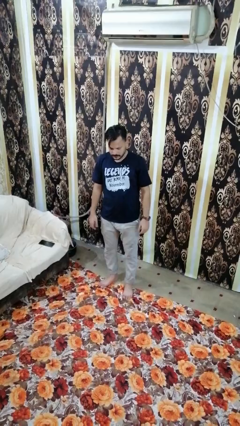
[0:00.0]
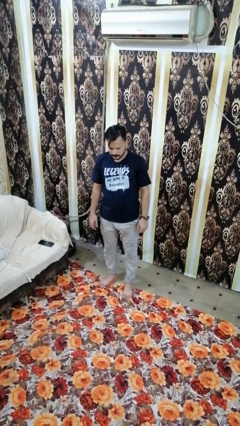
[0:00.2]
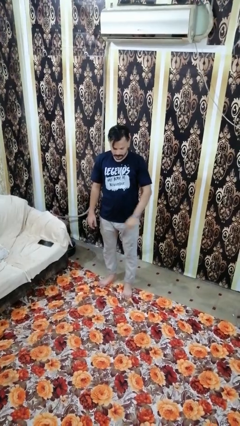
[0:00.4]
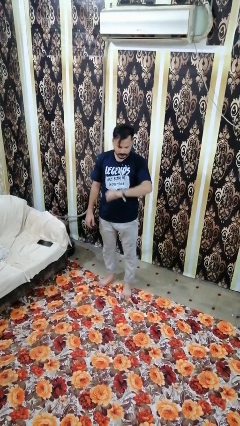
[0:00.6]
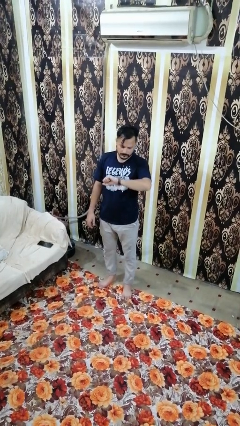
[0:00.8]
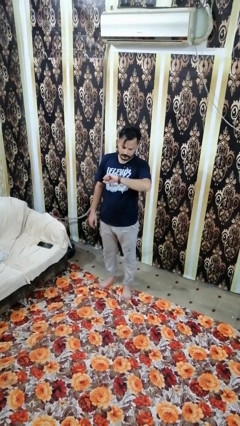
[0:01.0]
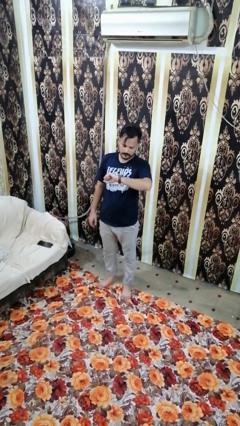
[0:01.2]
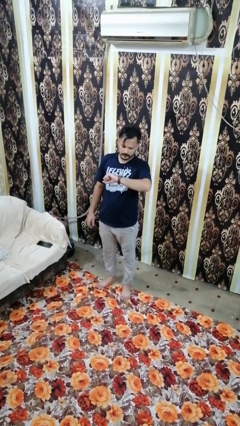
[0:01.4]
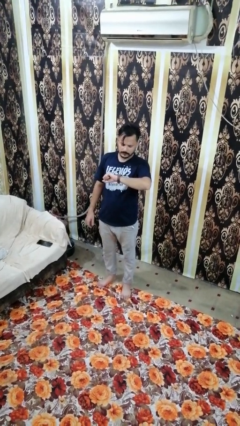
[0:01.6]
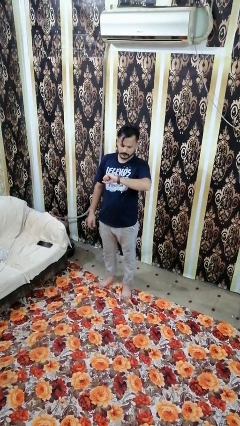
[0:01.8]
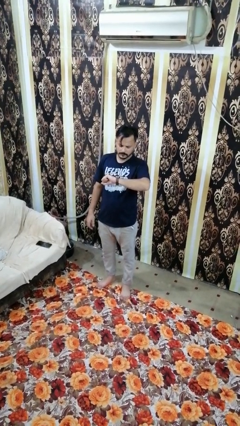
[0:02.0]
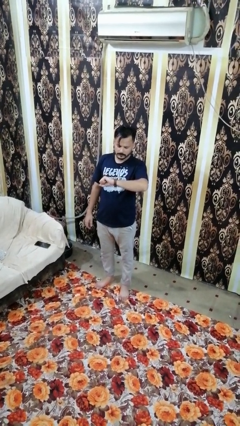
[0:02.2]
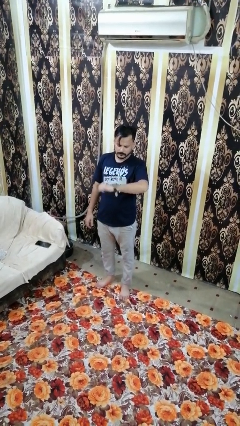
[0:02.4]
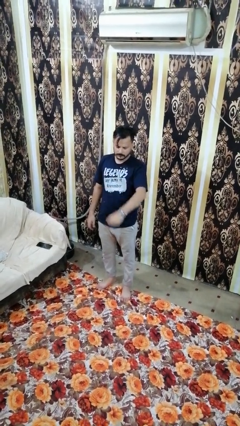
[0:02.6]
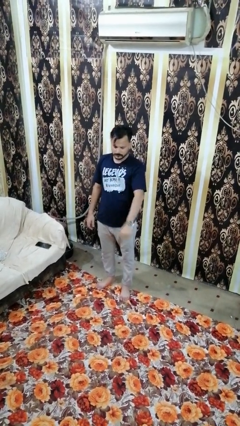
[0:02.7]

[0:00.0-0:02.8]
person looks at wristwatch

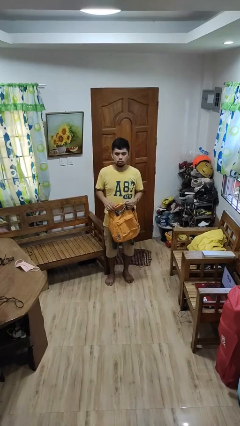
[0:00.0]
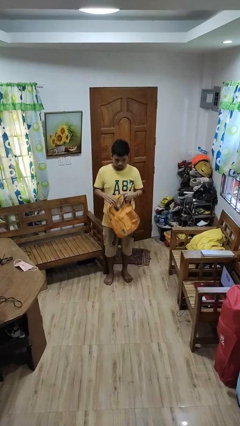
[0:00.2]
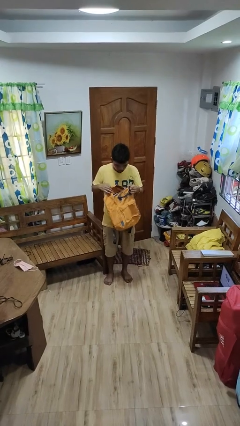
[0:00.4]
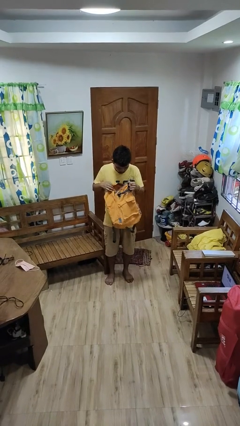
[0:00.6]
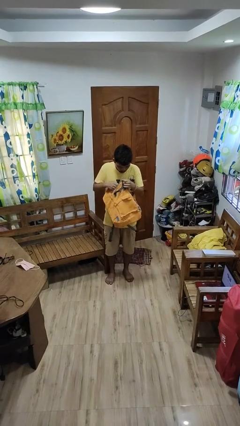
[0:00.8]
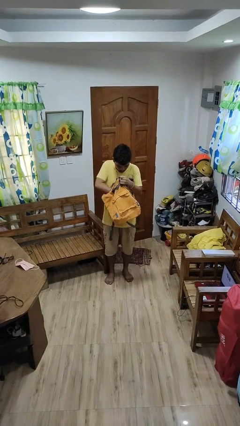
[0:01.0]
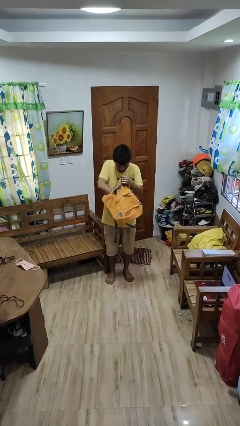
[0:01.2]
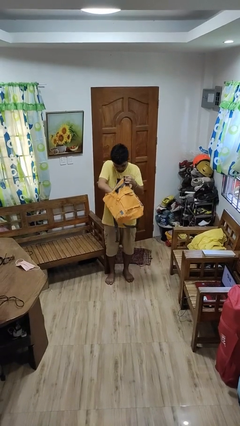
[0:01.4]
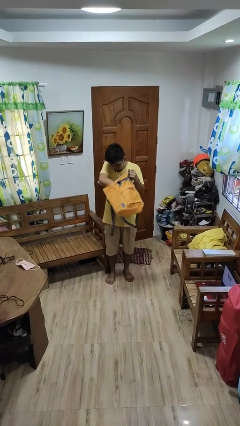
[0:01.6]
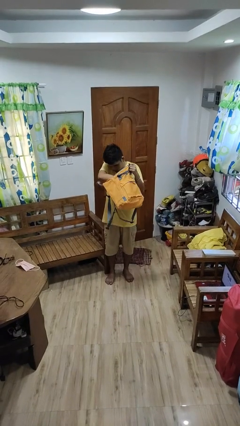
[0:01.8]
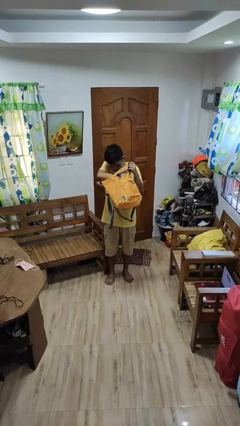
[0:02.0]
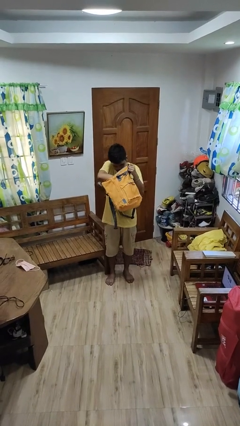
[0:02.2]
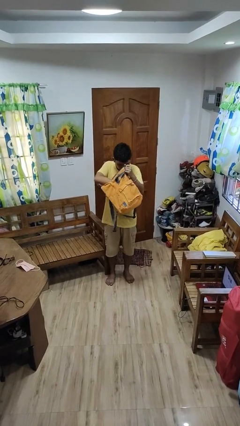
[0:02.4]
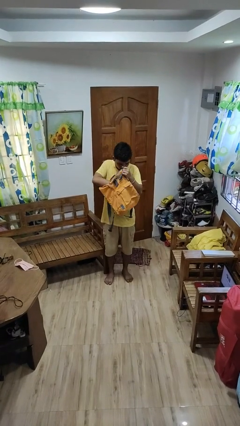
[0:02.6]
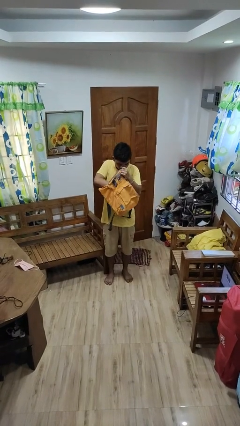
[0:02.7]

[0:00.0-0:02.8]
person searches in backpack

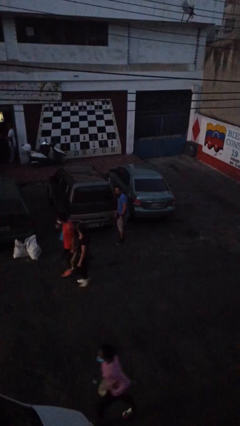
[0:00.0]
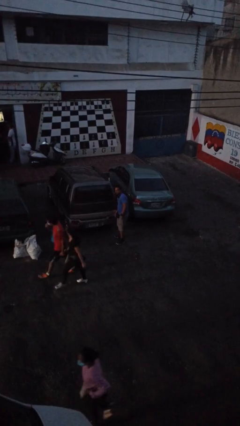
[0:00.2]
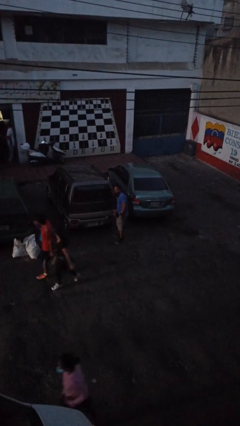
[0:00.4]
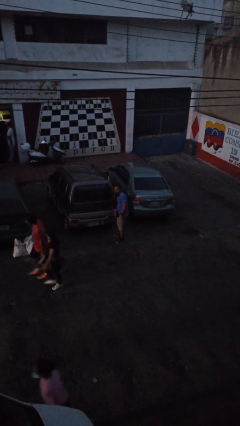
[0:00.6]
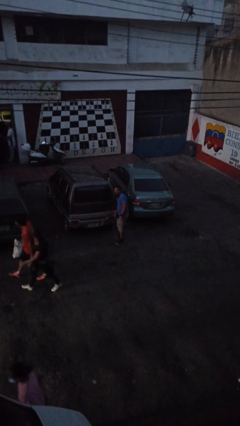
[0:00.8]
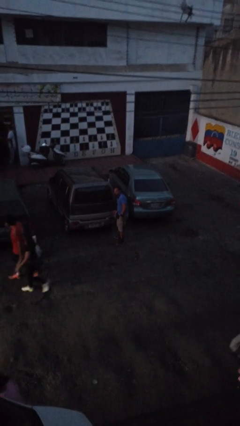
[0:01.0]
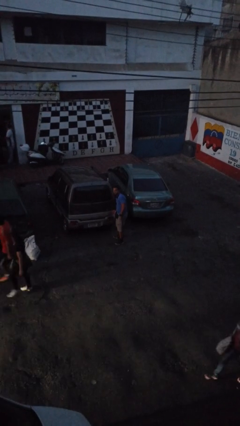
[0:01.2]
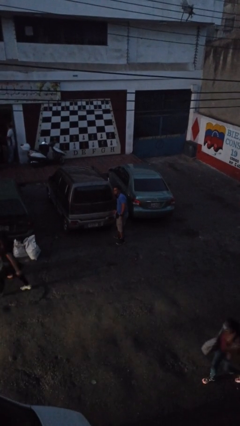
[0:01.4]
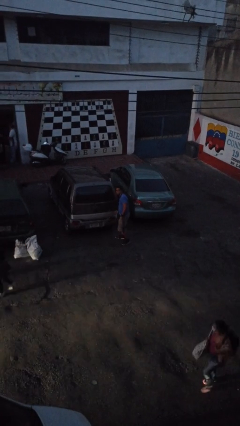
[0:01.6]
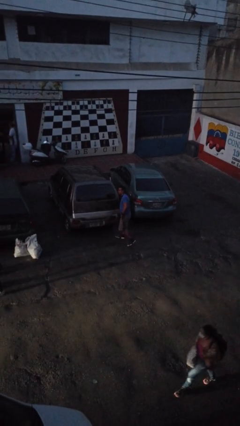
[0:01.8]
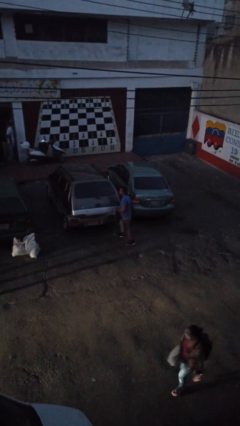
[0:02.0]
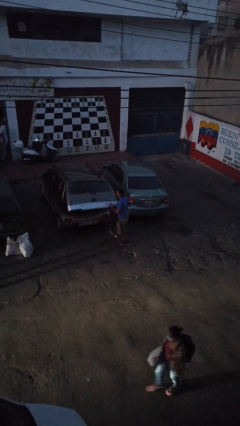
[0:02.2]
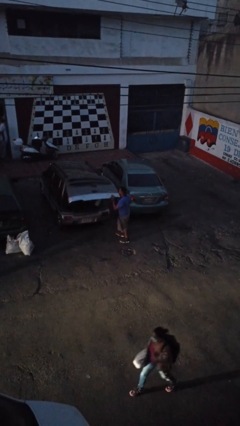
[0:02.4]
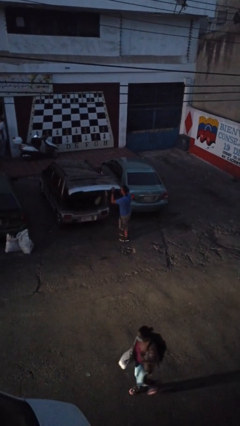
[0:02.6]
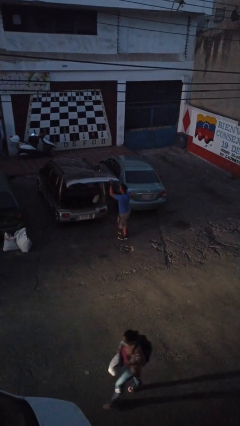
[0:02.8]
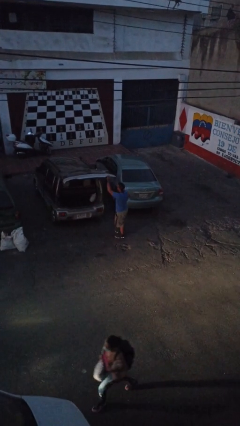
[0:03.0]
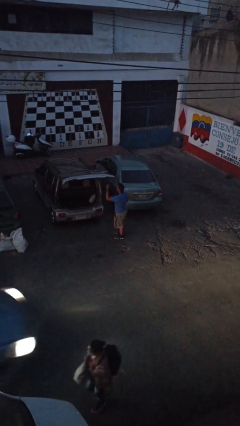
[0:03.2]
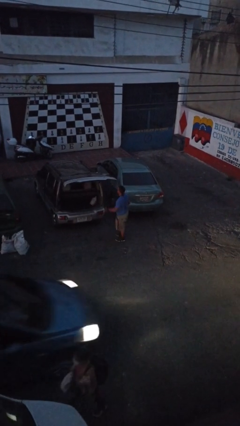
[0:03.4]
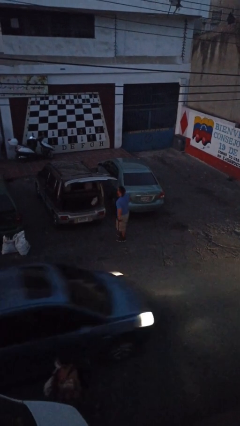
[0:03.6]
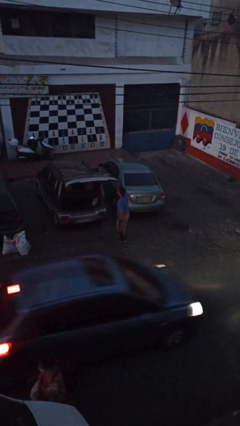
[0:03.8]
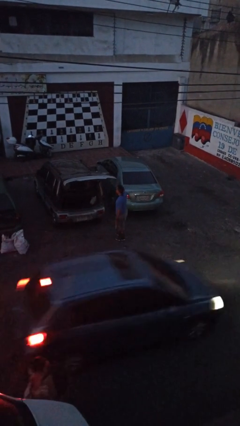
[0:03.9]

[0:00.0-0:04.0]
person opens car trunk

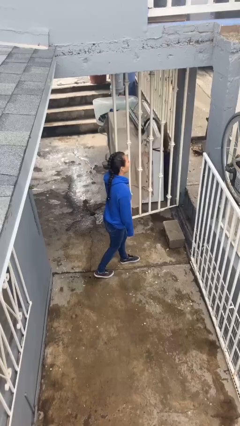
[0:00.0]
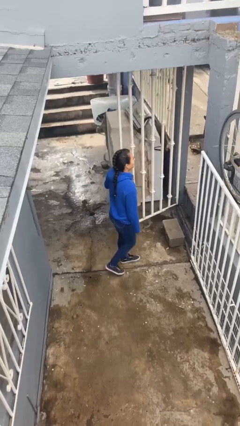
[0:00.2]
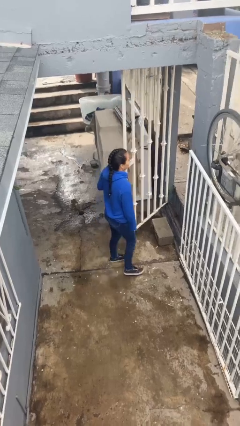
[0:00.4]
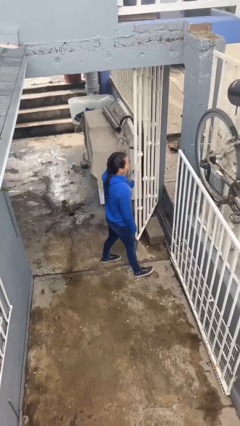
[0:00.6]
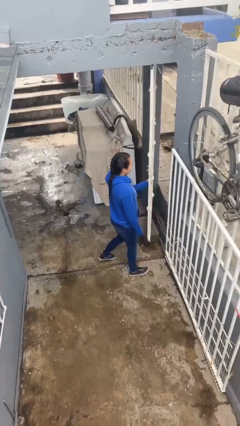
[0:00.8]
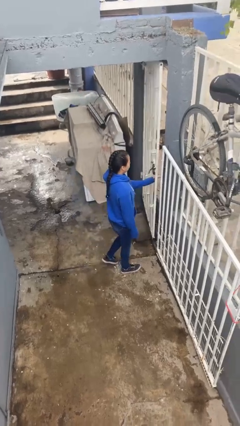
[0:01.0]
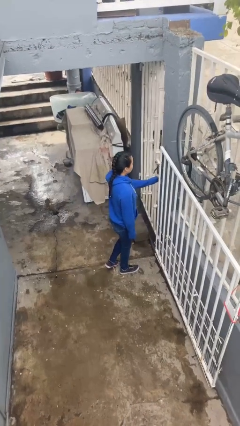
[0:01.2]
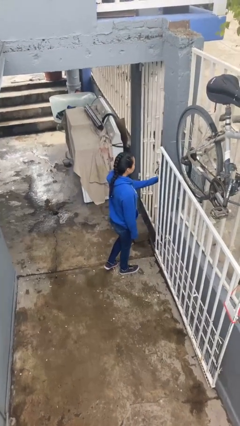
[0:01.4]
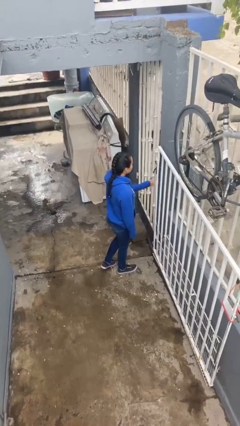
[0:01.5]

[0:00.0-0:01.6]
person closes facility door

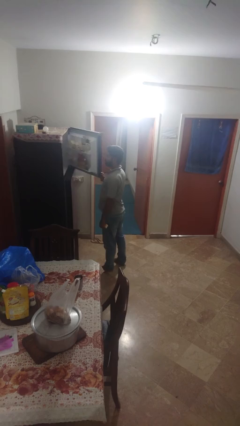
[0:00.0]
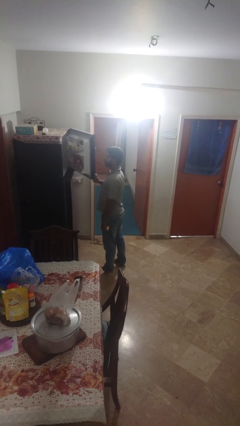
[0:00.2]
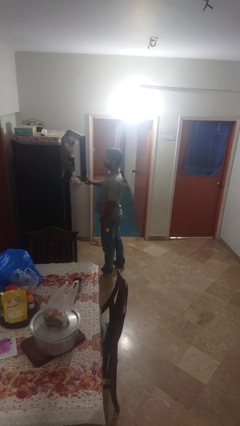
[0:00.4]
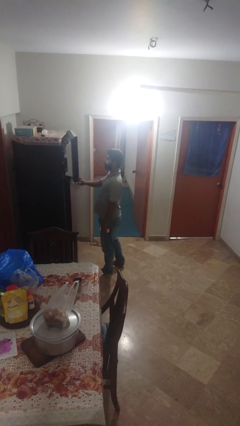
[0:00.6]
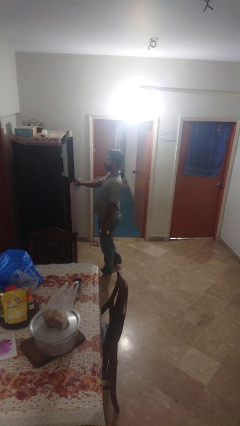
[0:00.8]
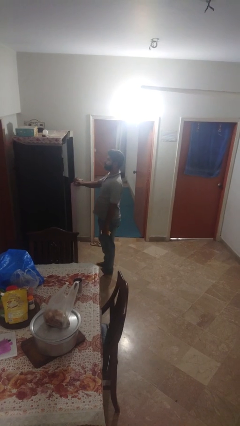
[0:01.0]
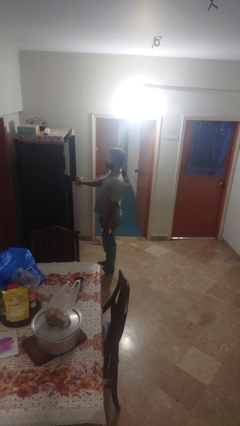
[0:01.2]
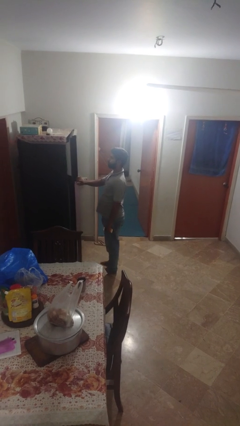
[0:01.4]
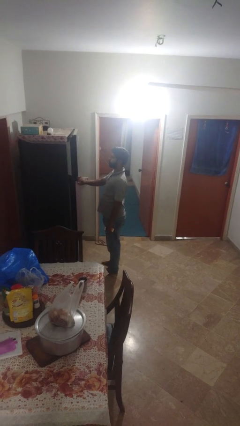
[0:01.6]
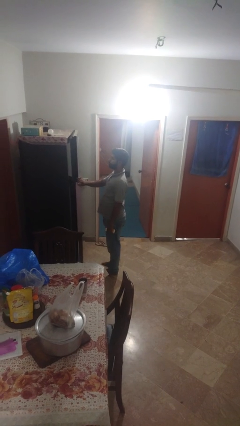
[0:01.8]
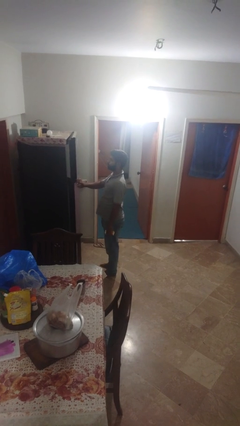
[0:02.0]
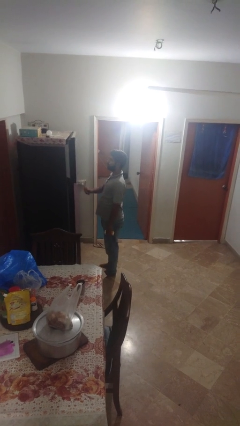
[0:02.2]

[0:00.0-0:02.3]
person closes refrigerator

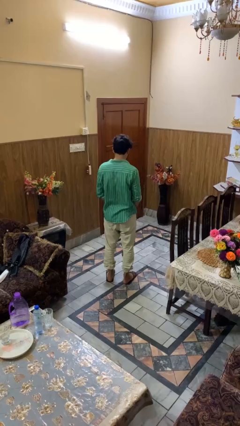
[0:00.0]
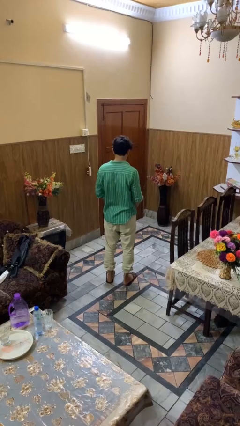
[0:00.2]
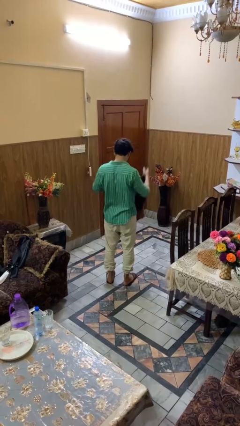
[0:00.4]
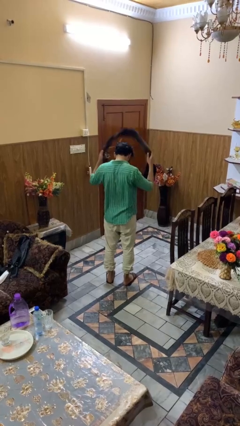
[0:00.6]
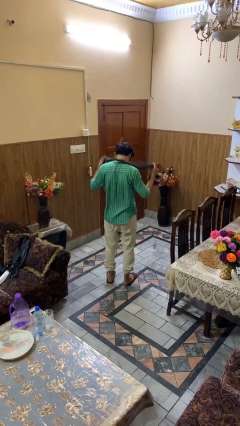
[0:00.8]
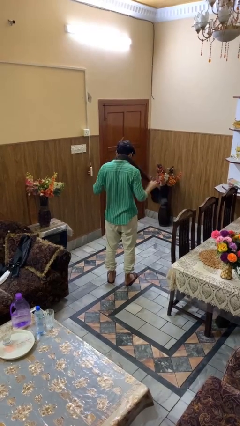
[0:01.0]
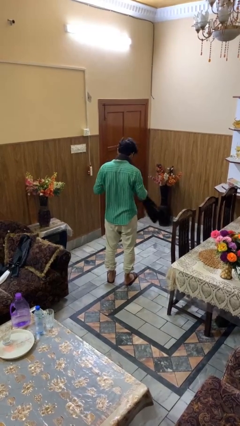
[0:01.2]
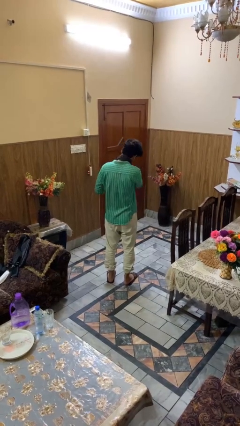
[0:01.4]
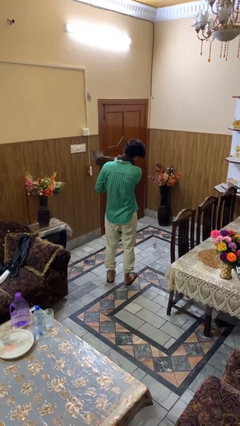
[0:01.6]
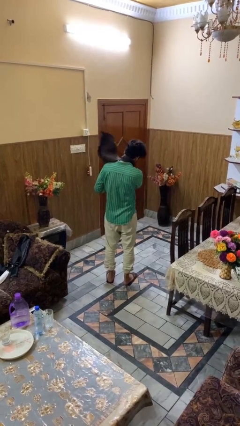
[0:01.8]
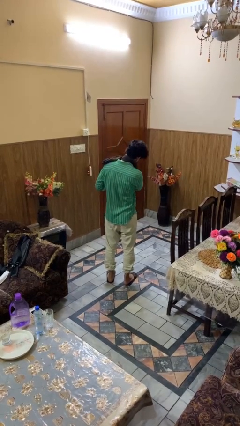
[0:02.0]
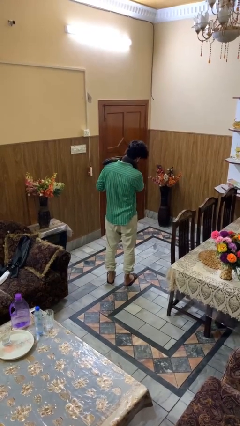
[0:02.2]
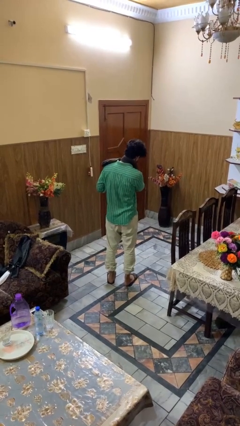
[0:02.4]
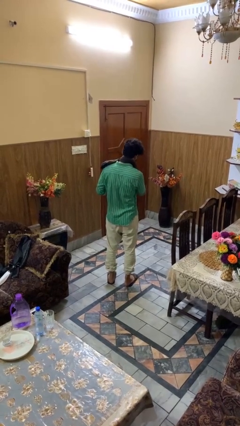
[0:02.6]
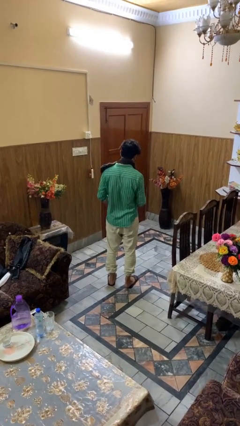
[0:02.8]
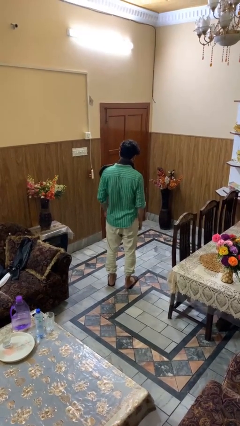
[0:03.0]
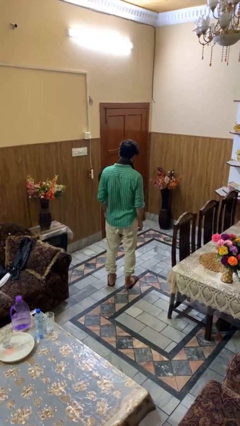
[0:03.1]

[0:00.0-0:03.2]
person puts on scarf

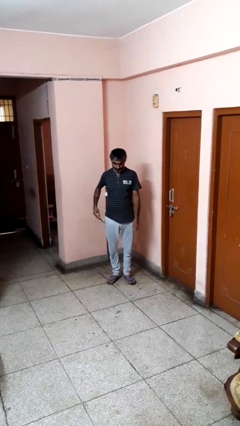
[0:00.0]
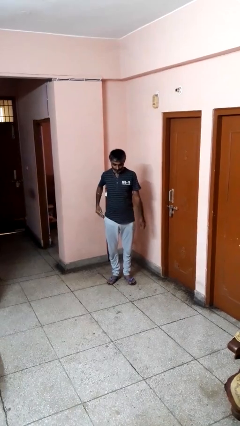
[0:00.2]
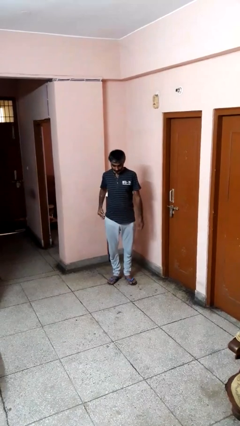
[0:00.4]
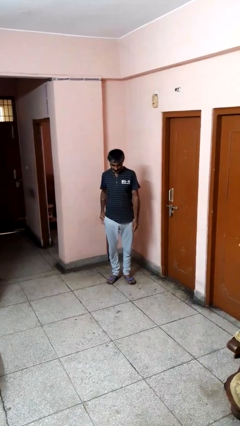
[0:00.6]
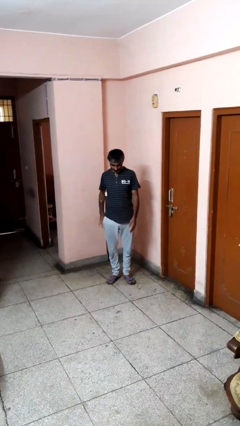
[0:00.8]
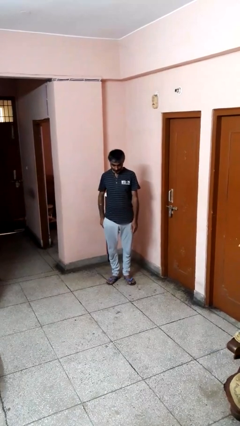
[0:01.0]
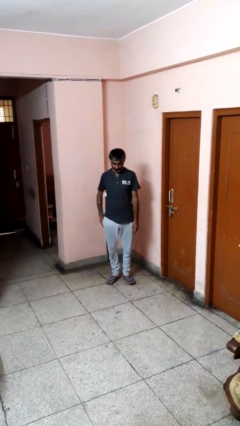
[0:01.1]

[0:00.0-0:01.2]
person puts phone into pocket
